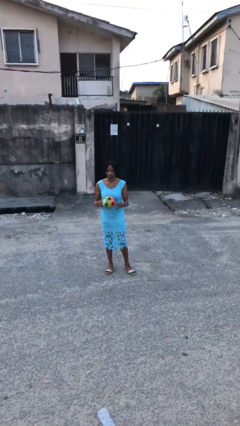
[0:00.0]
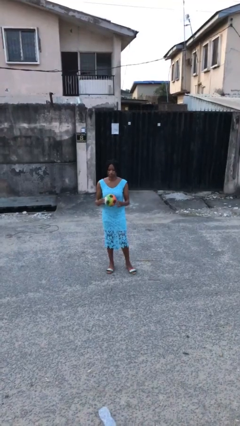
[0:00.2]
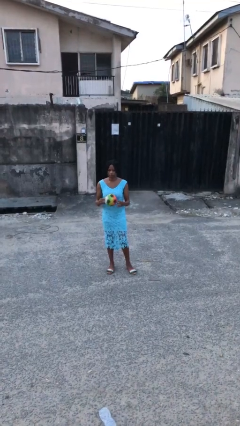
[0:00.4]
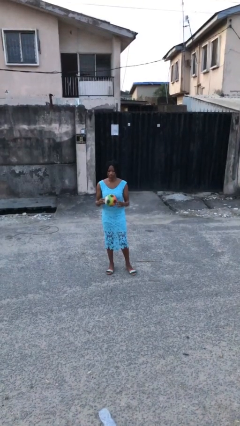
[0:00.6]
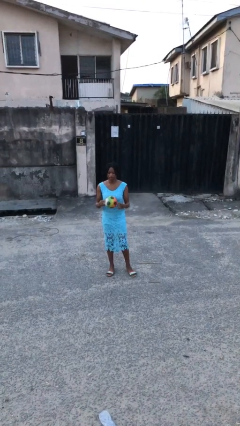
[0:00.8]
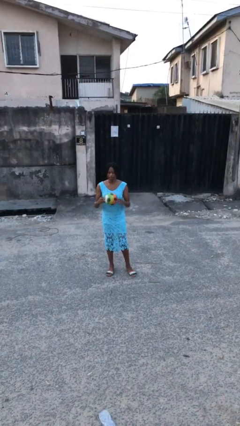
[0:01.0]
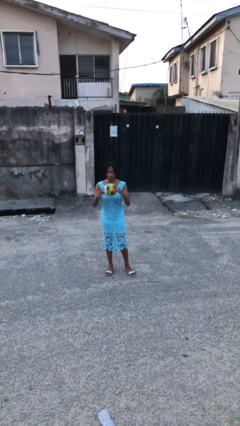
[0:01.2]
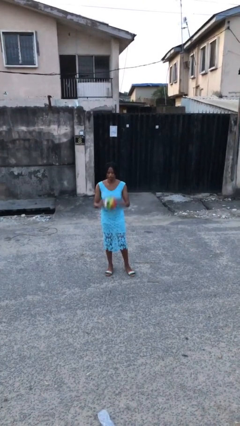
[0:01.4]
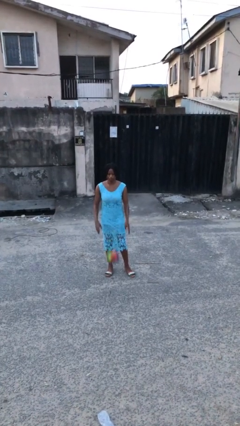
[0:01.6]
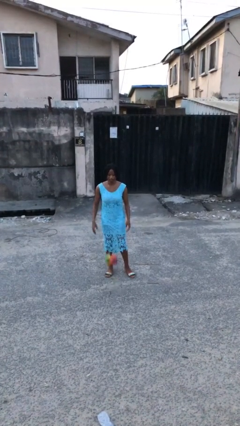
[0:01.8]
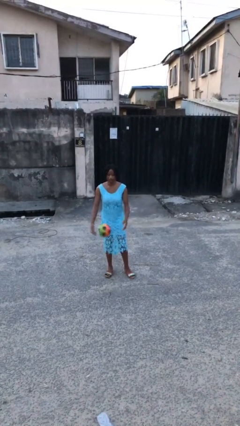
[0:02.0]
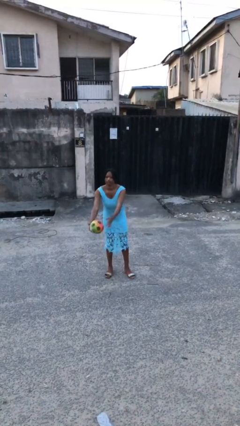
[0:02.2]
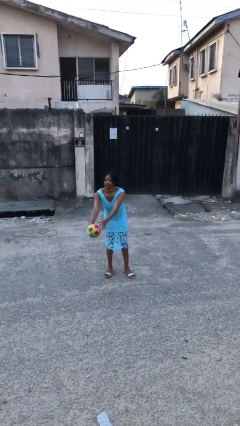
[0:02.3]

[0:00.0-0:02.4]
person bounces ball on floor

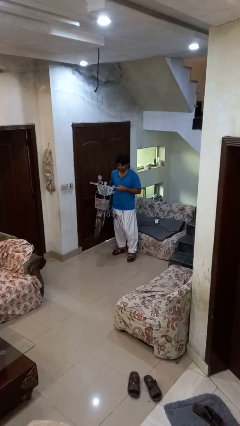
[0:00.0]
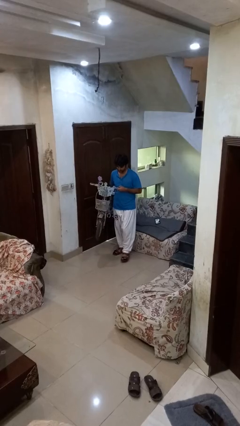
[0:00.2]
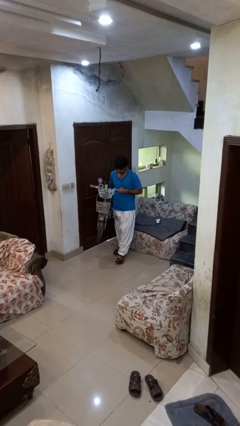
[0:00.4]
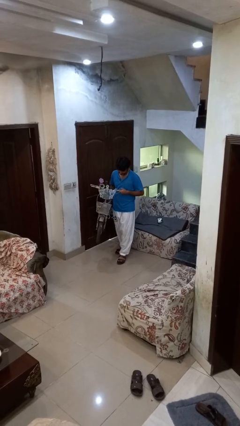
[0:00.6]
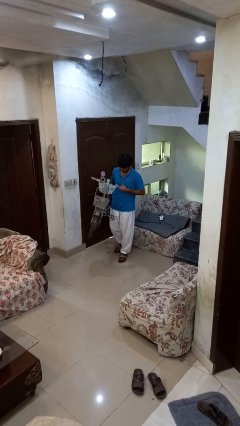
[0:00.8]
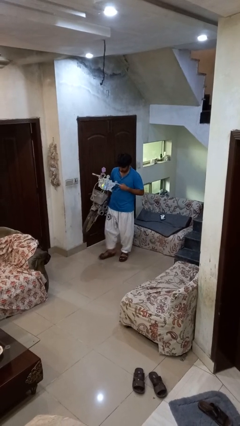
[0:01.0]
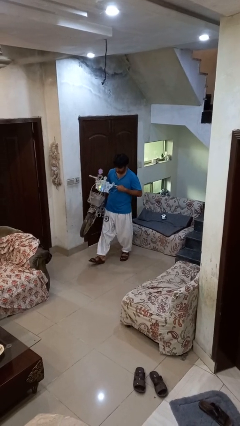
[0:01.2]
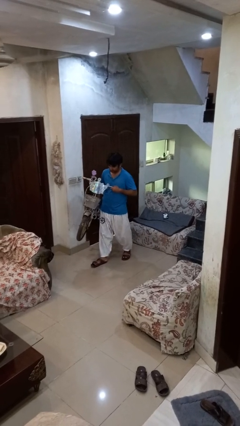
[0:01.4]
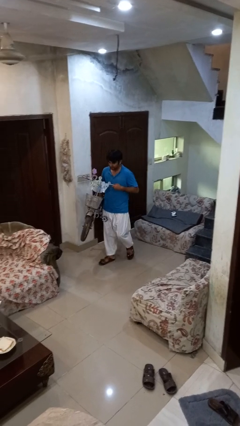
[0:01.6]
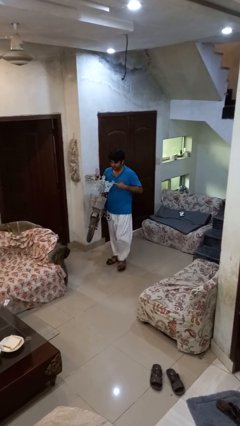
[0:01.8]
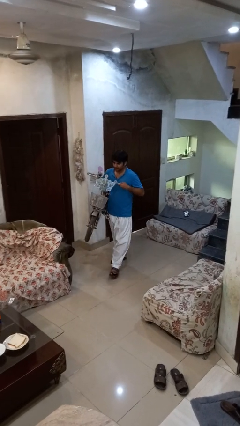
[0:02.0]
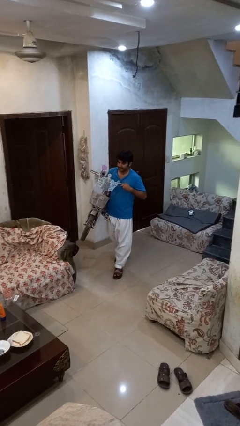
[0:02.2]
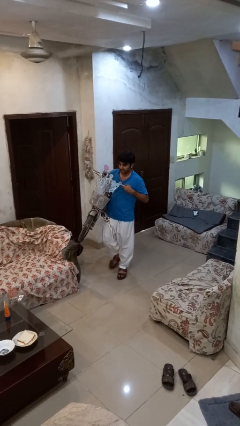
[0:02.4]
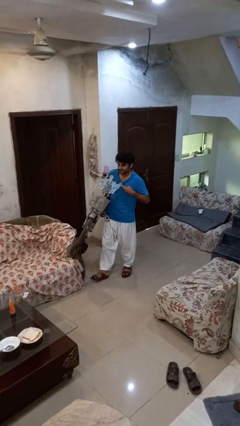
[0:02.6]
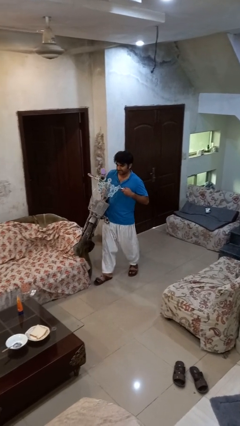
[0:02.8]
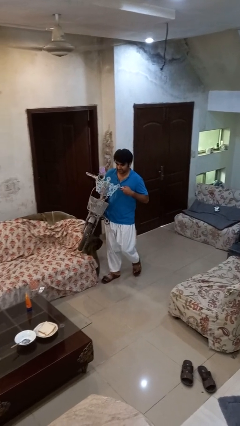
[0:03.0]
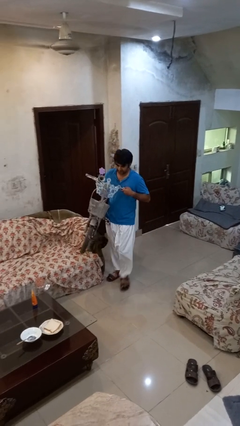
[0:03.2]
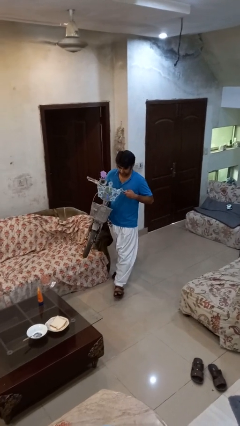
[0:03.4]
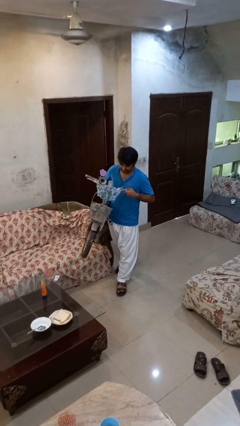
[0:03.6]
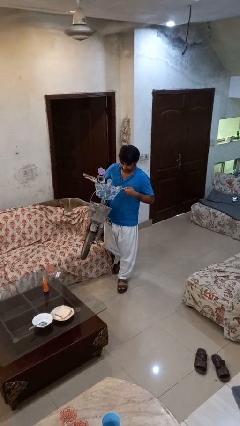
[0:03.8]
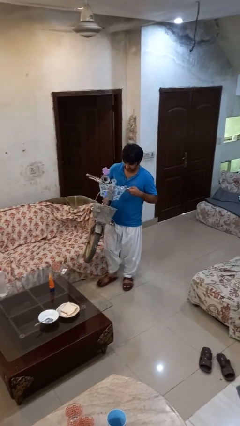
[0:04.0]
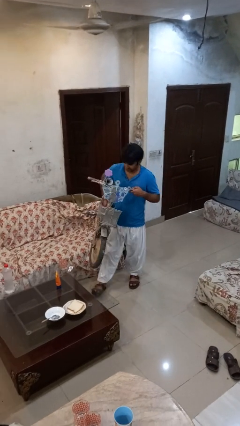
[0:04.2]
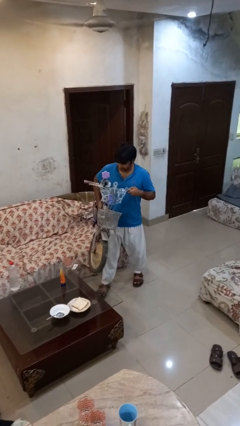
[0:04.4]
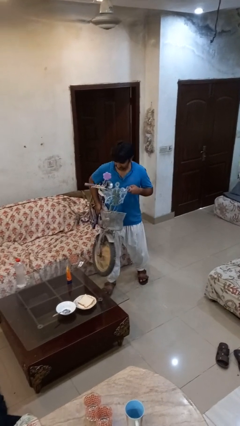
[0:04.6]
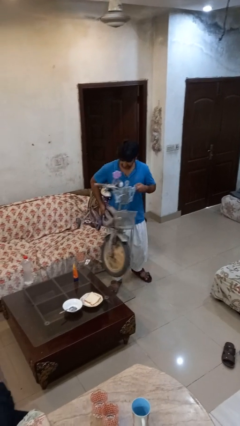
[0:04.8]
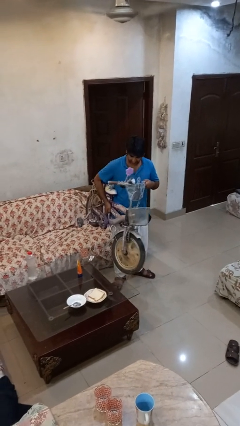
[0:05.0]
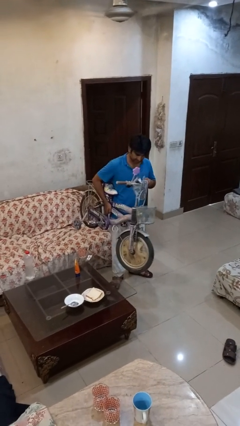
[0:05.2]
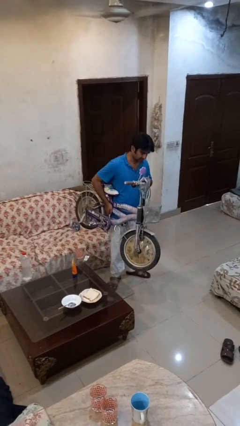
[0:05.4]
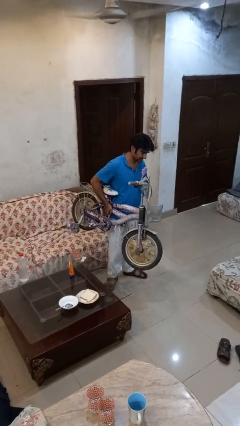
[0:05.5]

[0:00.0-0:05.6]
person carries bicycle

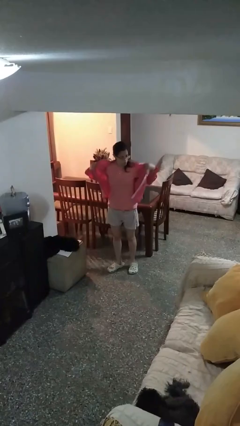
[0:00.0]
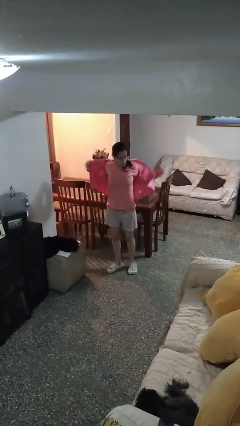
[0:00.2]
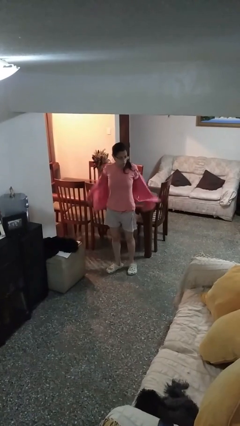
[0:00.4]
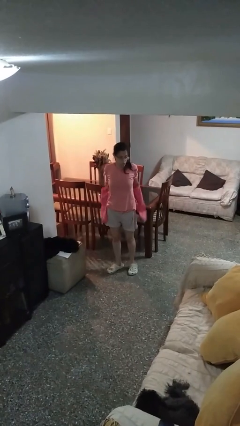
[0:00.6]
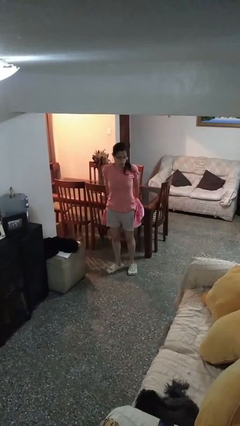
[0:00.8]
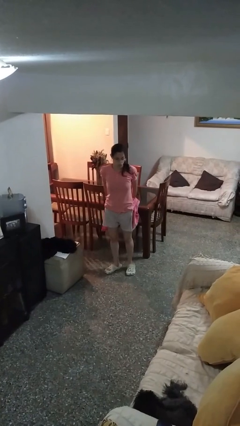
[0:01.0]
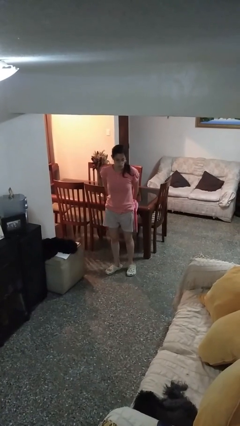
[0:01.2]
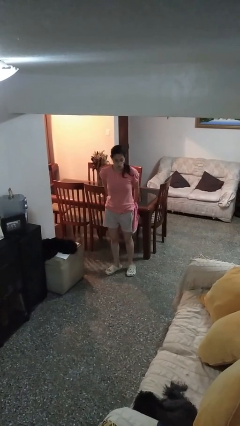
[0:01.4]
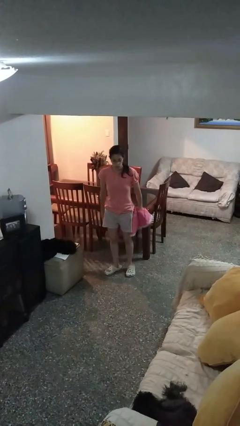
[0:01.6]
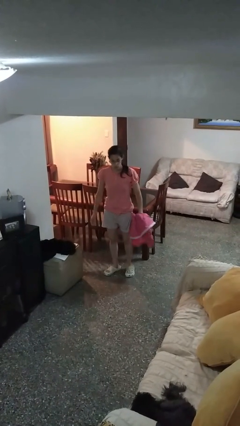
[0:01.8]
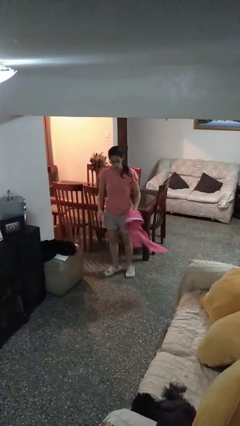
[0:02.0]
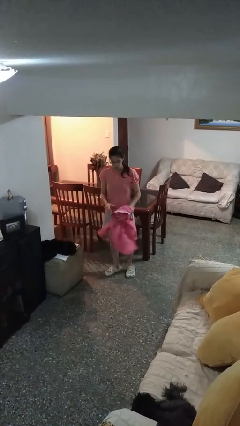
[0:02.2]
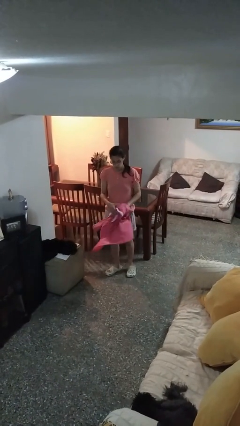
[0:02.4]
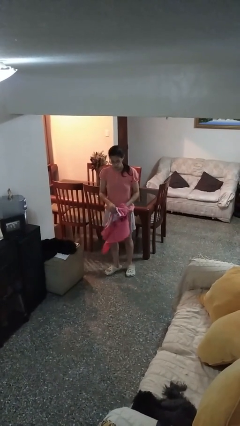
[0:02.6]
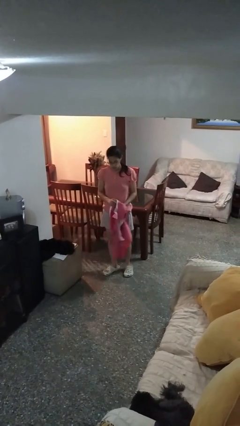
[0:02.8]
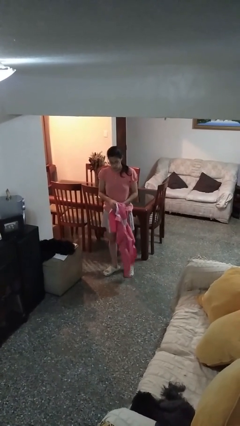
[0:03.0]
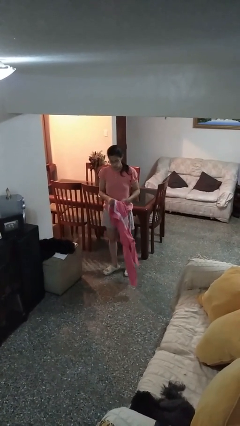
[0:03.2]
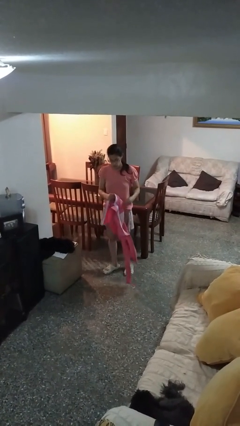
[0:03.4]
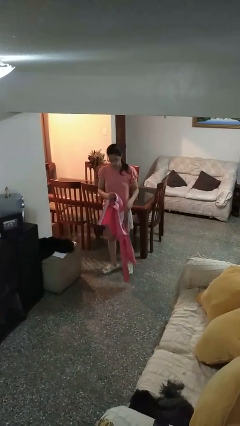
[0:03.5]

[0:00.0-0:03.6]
person takes off shirt

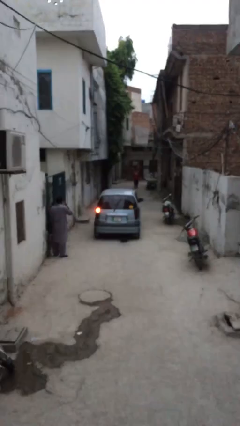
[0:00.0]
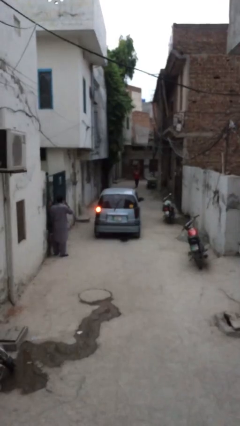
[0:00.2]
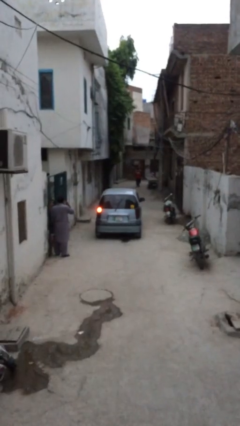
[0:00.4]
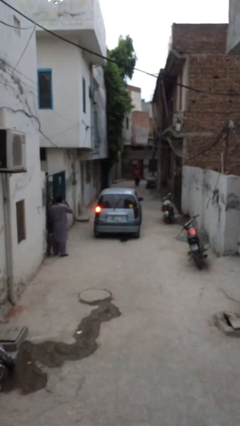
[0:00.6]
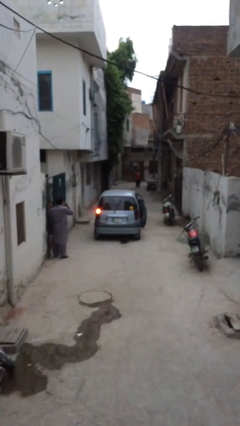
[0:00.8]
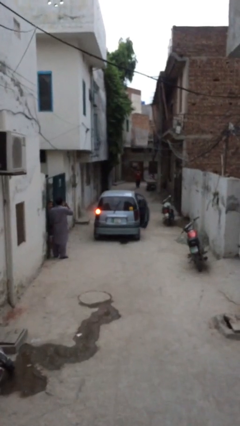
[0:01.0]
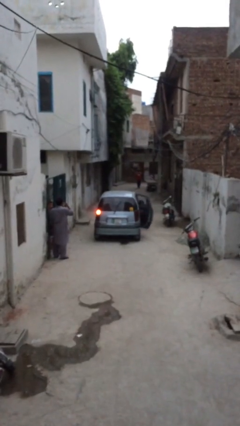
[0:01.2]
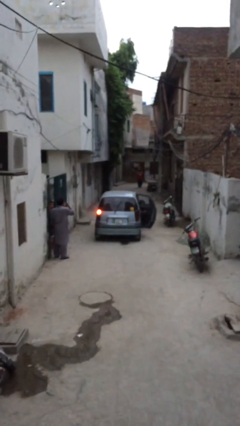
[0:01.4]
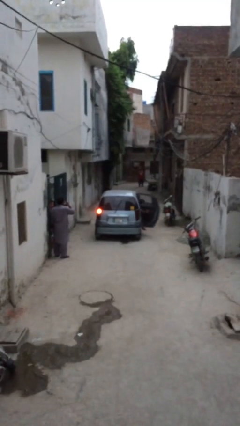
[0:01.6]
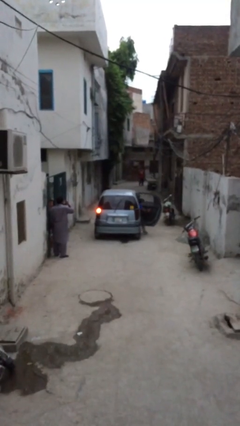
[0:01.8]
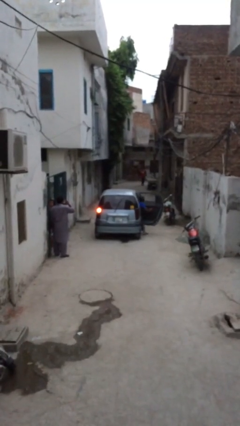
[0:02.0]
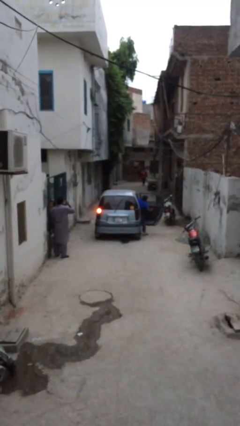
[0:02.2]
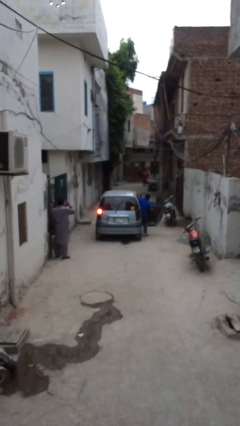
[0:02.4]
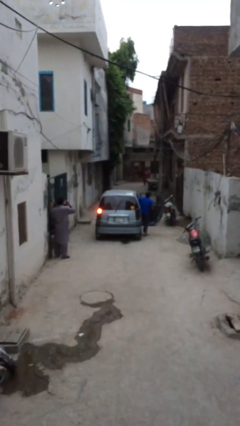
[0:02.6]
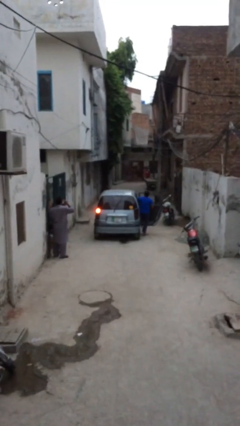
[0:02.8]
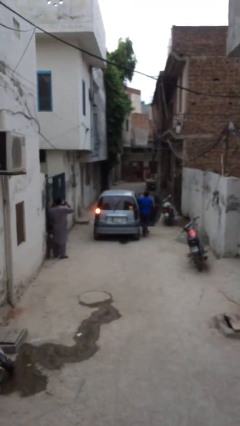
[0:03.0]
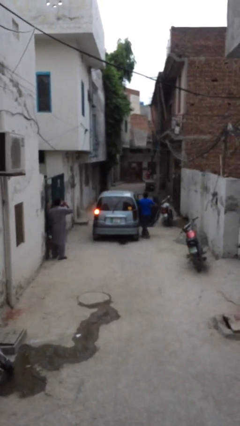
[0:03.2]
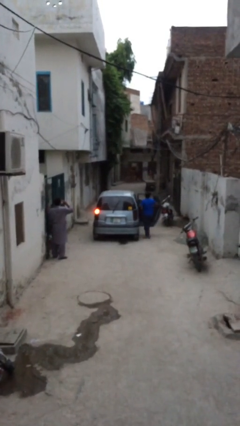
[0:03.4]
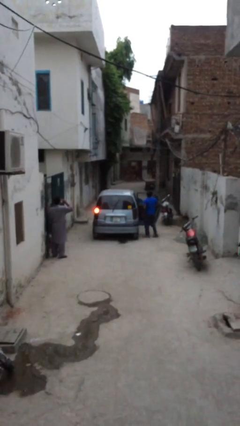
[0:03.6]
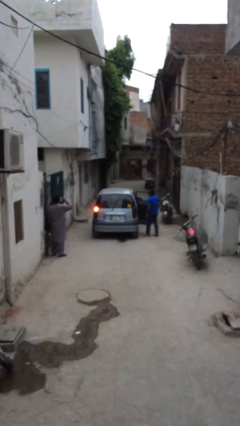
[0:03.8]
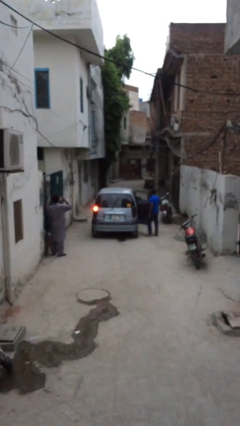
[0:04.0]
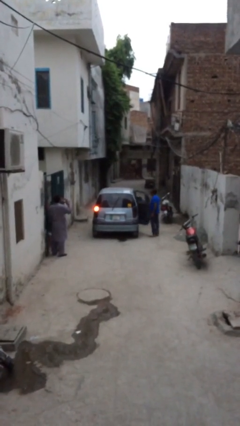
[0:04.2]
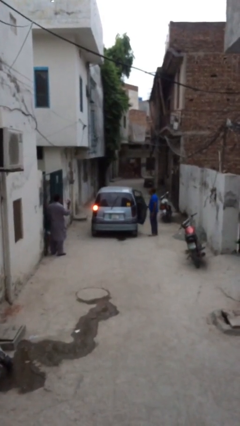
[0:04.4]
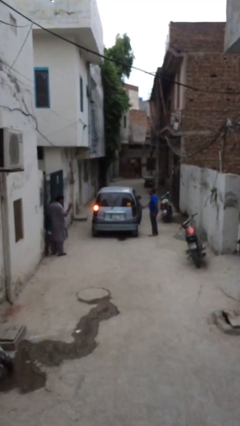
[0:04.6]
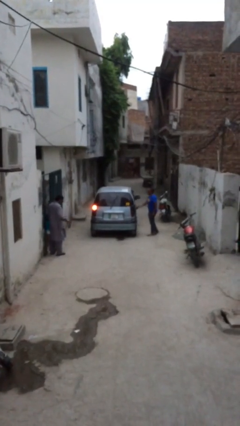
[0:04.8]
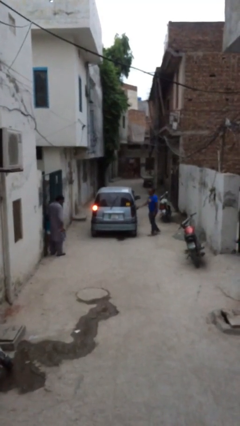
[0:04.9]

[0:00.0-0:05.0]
car drops off person

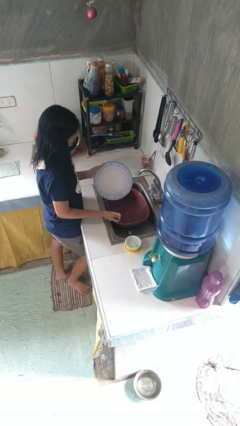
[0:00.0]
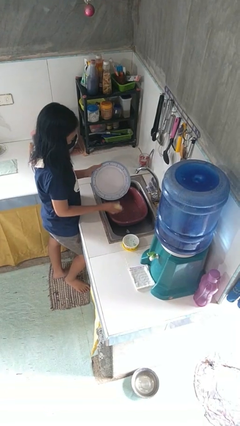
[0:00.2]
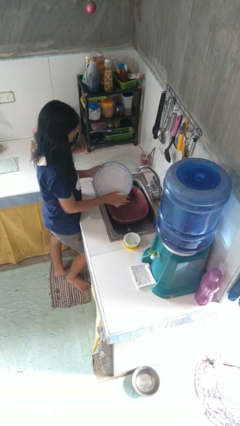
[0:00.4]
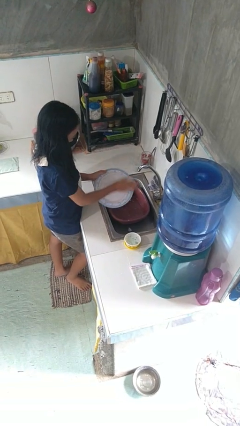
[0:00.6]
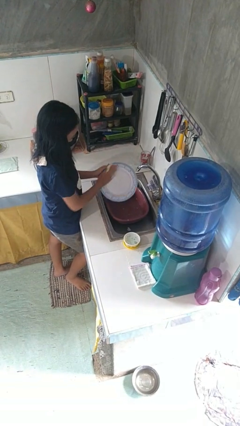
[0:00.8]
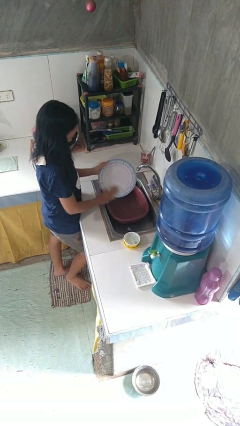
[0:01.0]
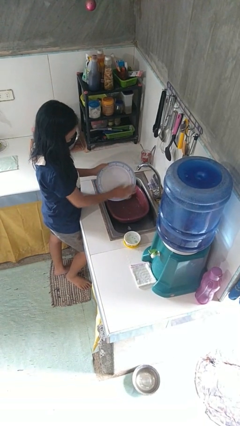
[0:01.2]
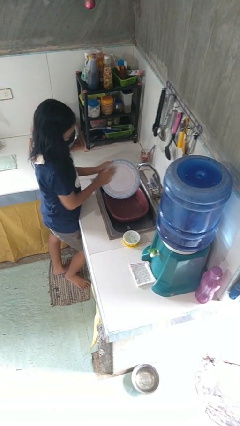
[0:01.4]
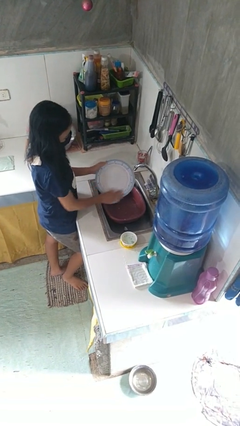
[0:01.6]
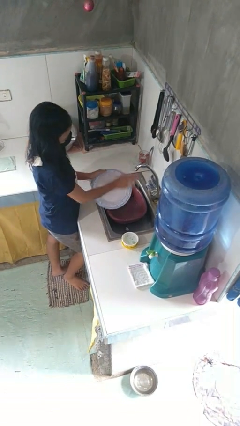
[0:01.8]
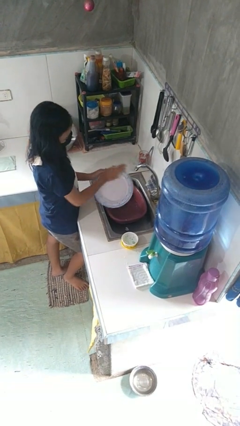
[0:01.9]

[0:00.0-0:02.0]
person washes dish
